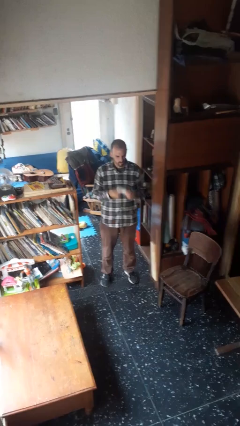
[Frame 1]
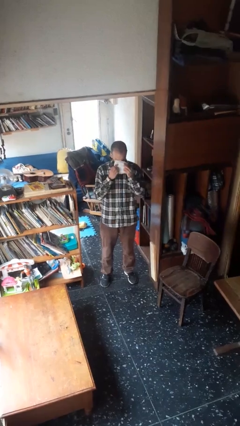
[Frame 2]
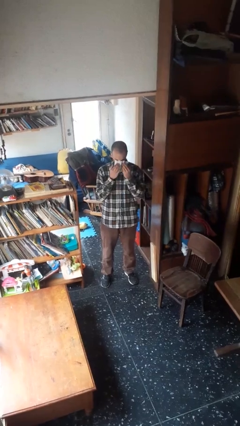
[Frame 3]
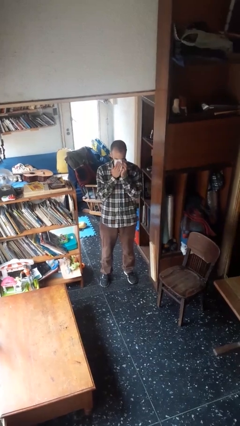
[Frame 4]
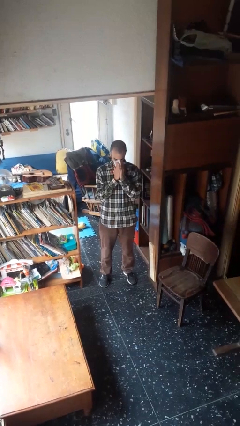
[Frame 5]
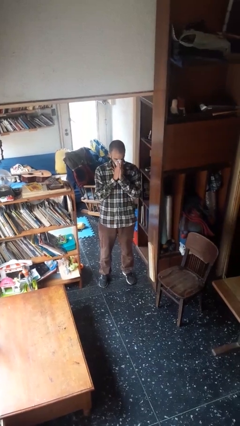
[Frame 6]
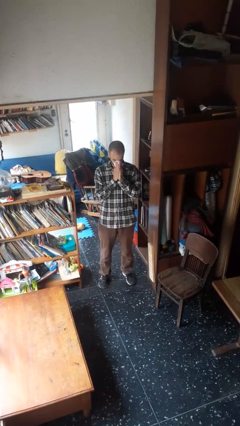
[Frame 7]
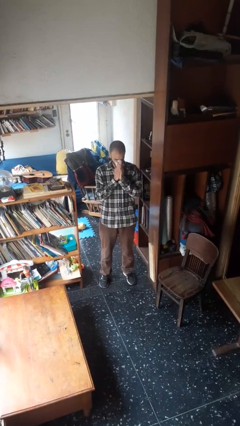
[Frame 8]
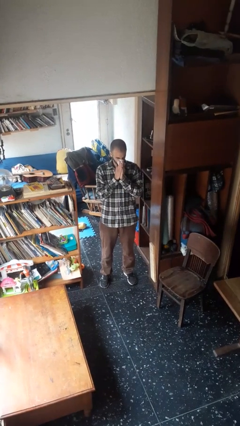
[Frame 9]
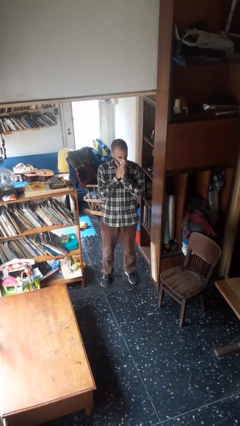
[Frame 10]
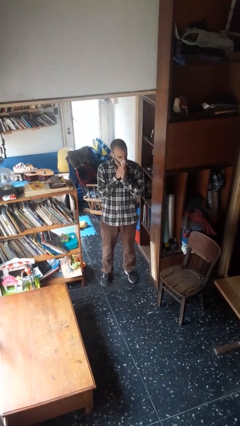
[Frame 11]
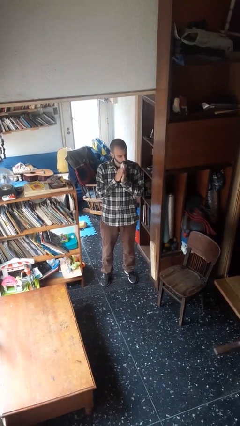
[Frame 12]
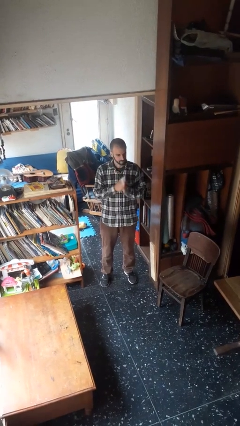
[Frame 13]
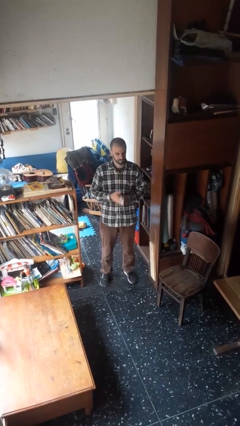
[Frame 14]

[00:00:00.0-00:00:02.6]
person blows nose

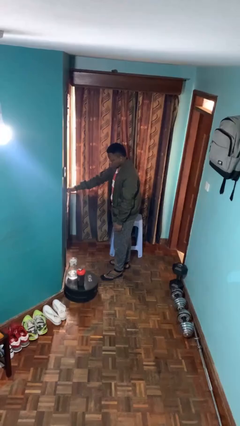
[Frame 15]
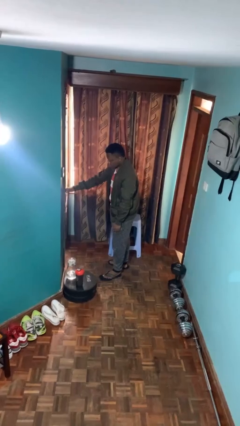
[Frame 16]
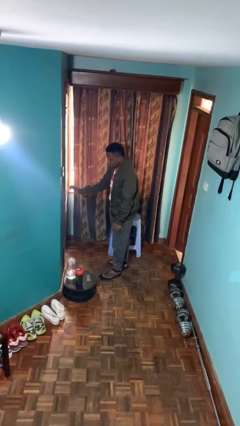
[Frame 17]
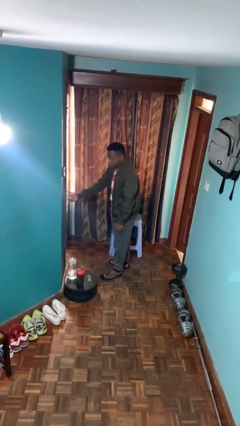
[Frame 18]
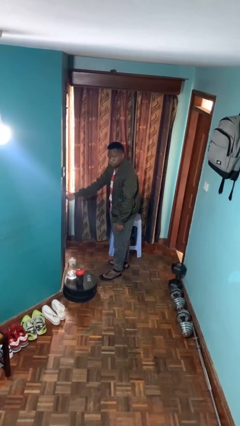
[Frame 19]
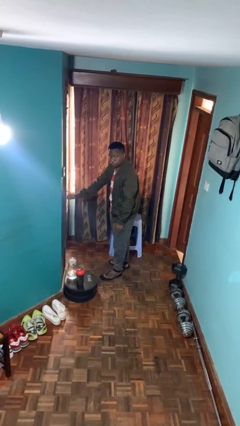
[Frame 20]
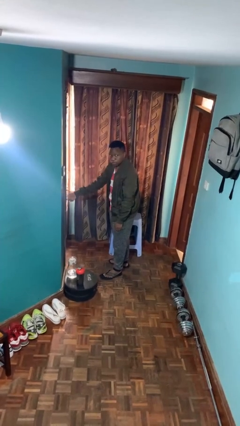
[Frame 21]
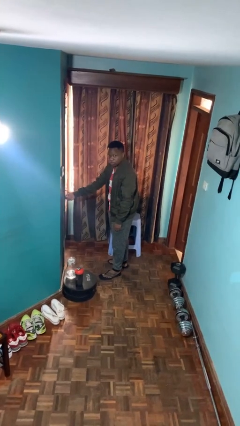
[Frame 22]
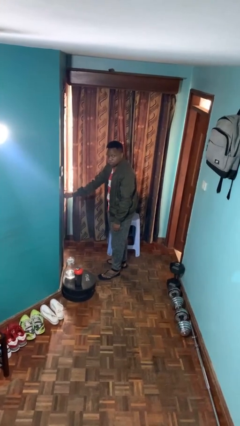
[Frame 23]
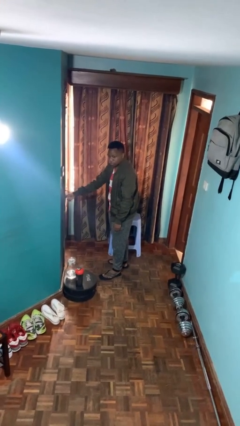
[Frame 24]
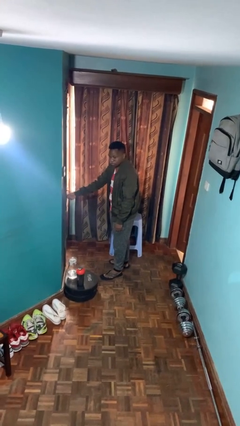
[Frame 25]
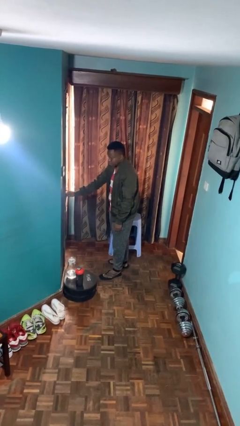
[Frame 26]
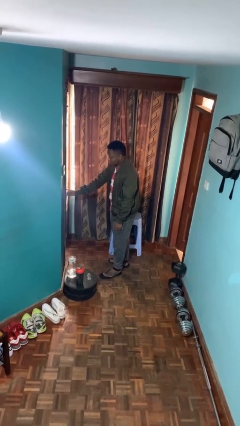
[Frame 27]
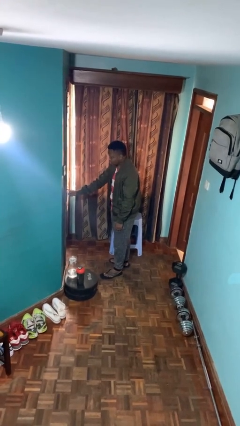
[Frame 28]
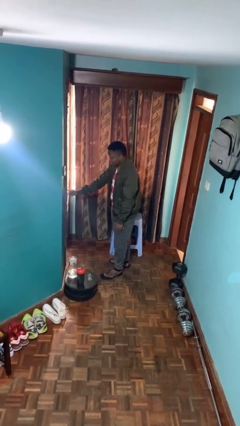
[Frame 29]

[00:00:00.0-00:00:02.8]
person locks door with keys

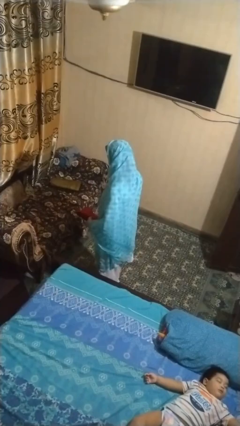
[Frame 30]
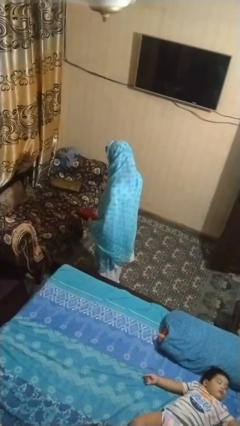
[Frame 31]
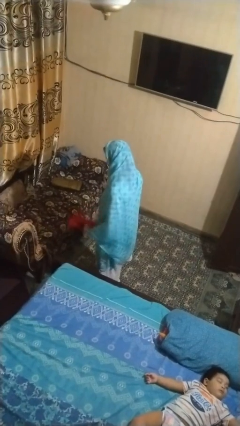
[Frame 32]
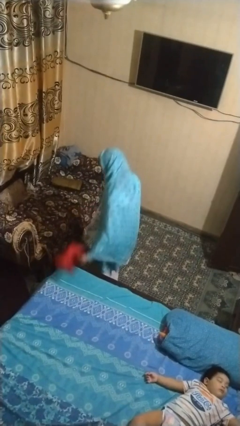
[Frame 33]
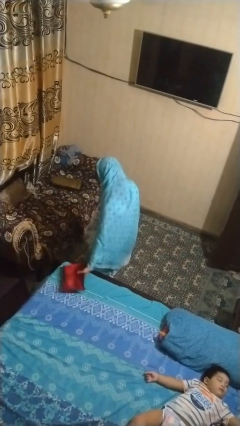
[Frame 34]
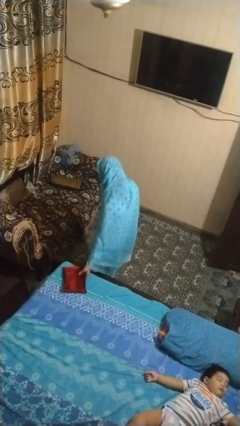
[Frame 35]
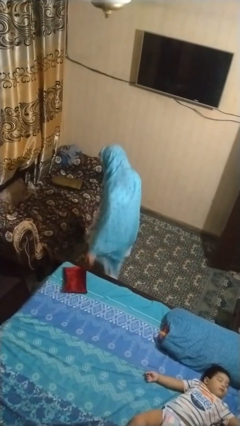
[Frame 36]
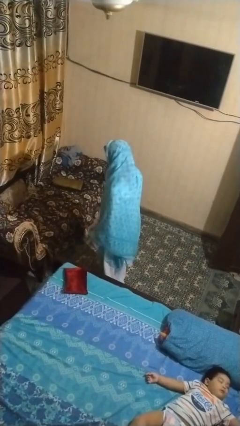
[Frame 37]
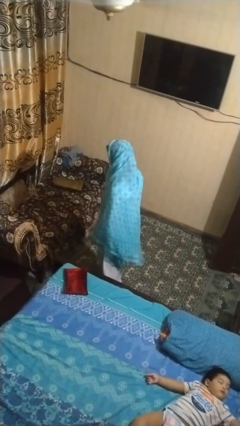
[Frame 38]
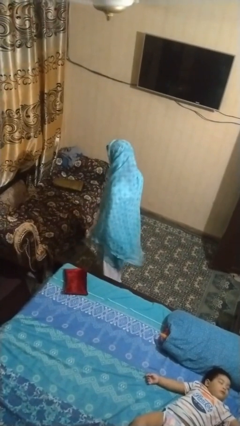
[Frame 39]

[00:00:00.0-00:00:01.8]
person puts down object on bed

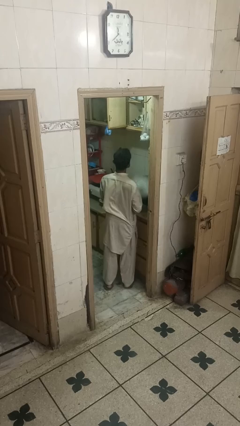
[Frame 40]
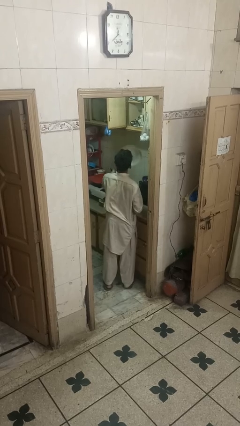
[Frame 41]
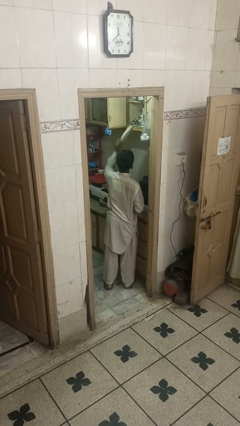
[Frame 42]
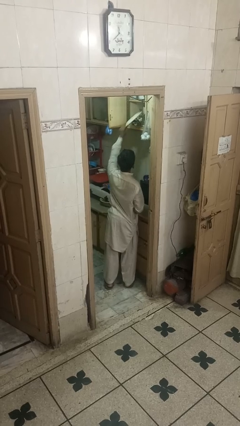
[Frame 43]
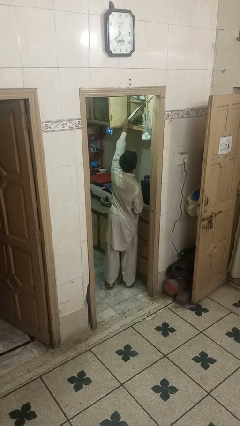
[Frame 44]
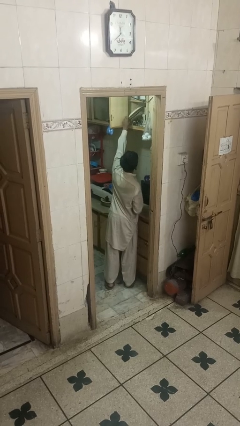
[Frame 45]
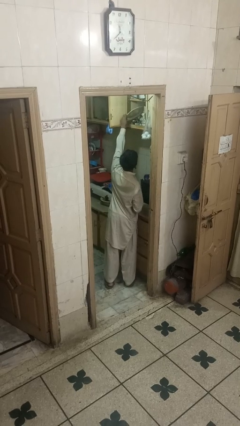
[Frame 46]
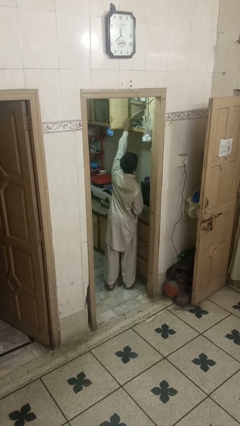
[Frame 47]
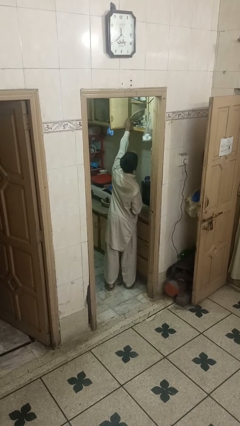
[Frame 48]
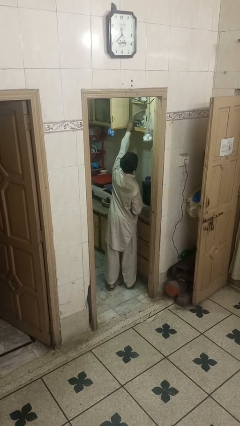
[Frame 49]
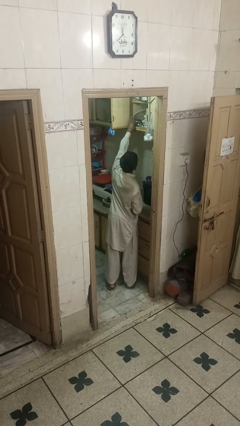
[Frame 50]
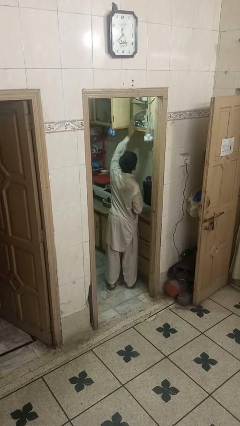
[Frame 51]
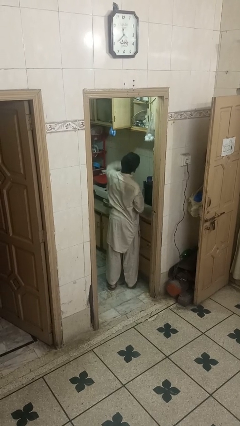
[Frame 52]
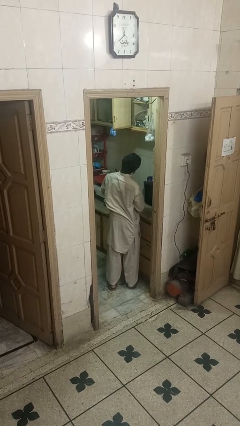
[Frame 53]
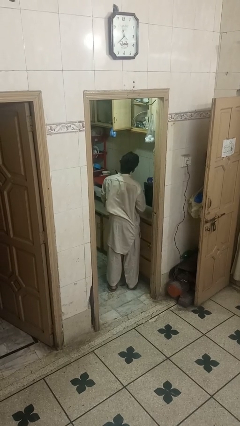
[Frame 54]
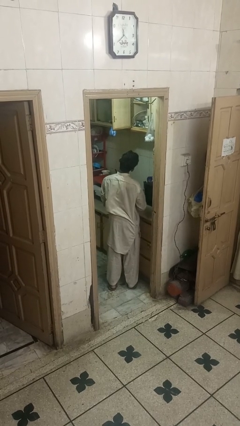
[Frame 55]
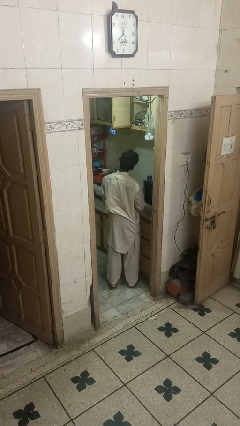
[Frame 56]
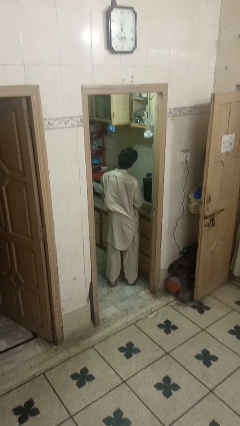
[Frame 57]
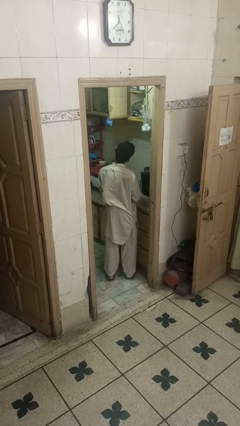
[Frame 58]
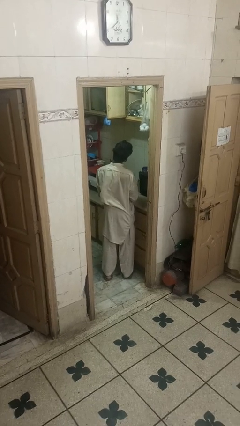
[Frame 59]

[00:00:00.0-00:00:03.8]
person puts object in cabinet

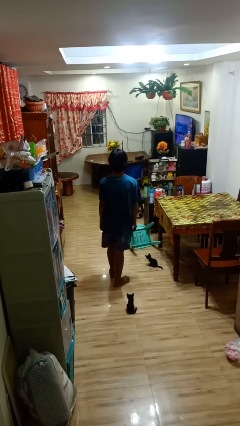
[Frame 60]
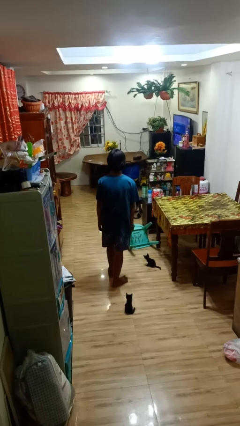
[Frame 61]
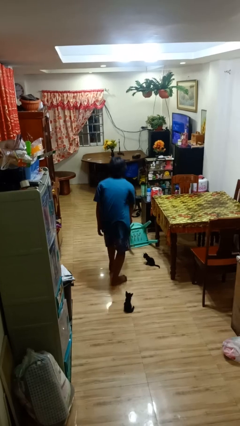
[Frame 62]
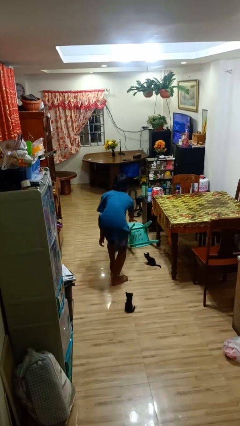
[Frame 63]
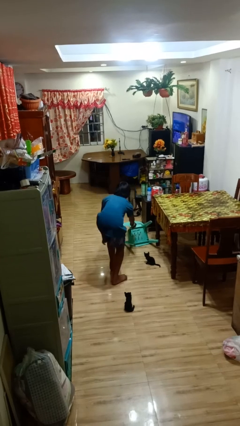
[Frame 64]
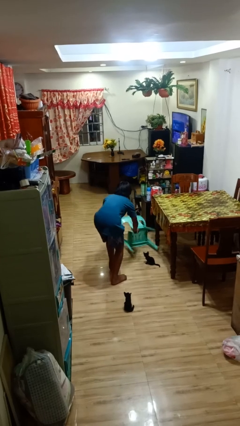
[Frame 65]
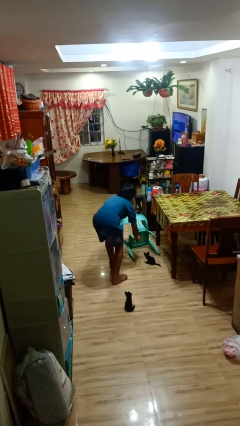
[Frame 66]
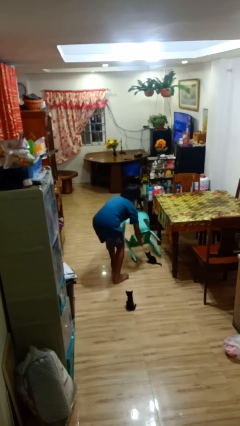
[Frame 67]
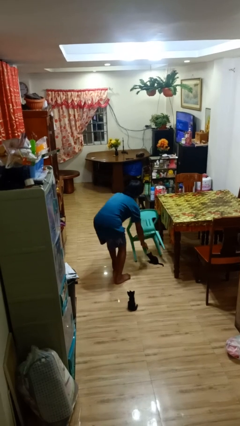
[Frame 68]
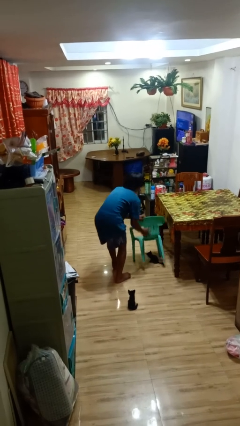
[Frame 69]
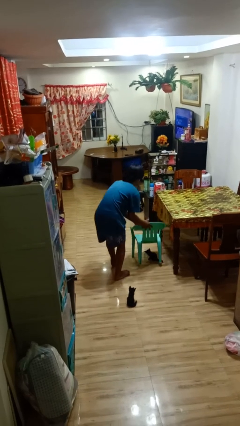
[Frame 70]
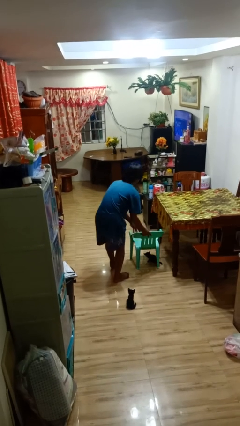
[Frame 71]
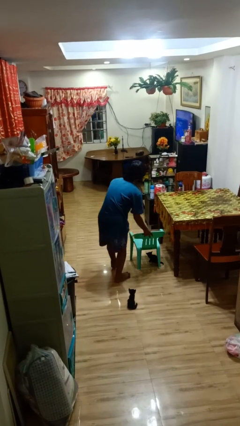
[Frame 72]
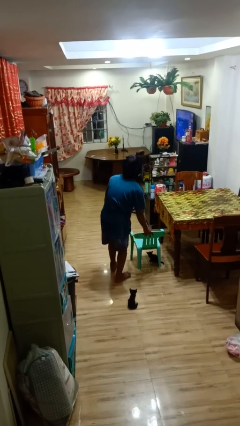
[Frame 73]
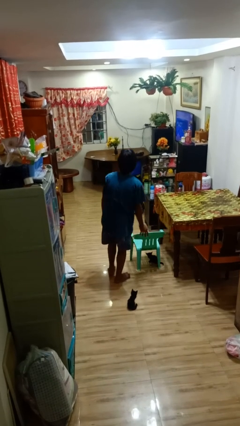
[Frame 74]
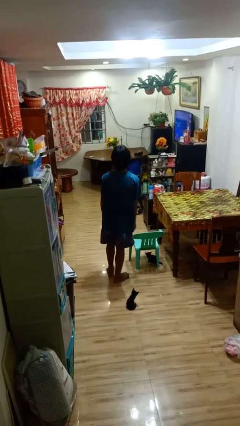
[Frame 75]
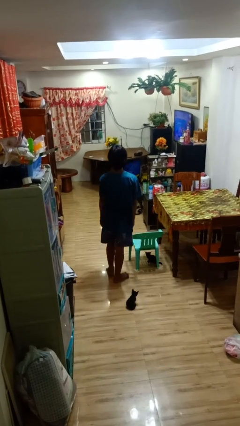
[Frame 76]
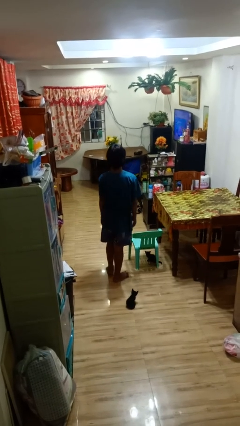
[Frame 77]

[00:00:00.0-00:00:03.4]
person sets upright furniture

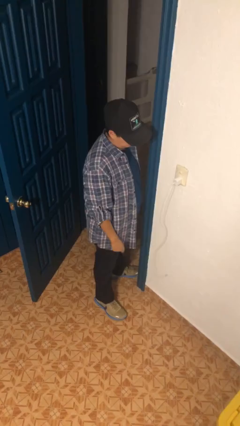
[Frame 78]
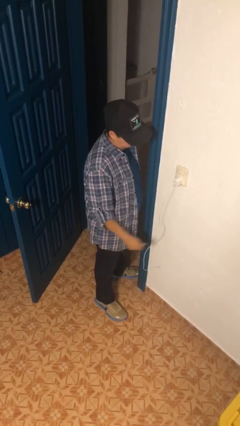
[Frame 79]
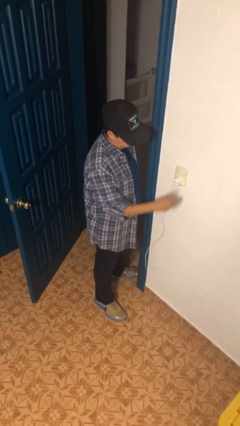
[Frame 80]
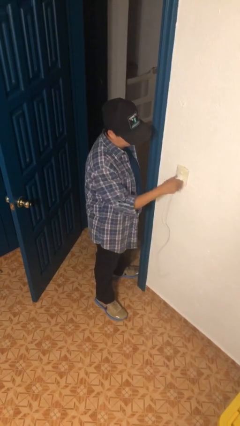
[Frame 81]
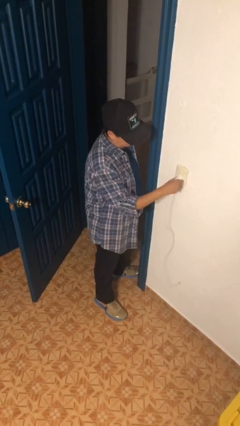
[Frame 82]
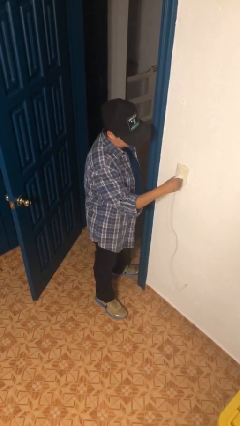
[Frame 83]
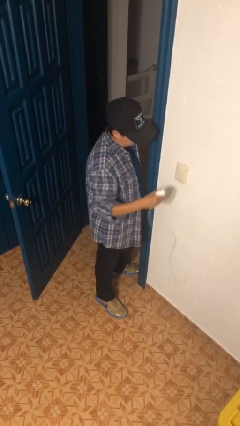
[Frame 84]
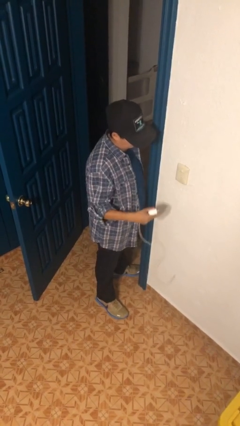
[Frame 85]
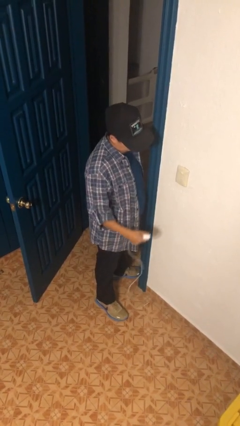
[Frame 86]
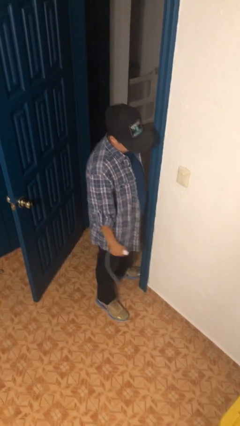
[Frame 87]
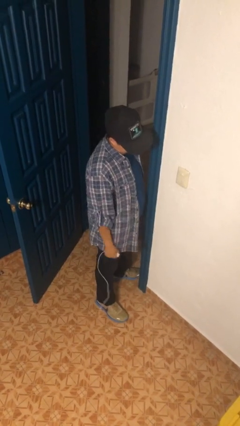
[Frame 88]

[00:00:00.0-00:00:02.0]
person unplugs from electrical socket

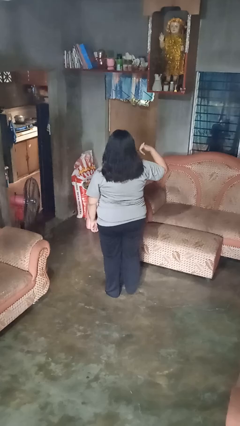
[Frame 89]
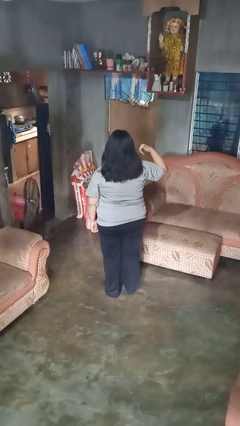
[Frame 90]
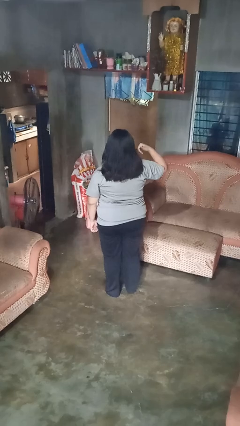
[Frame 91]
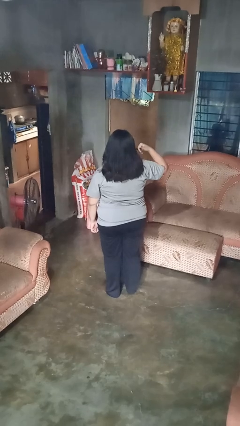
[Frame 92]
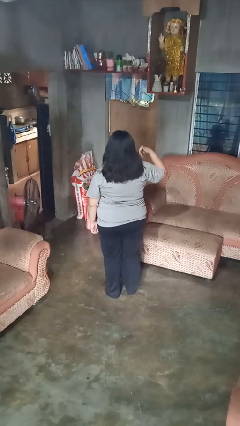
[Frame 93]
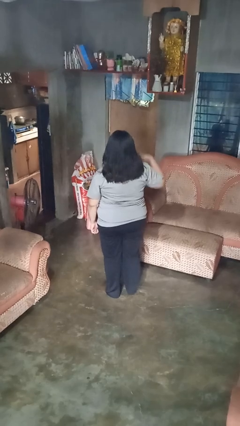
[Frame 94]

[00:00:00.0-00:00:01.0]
person gestures call me
